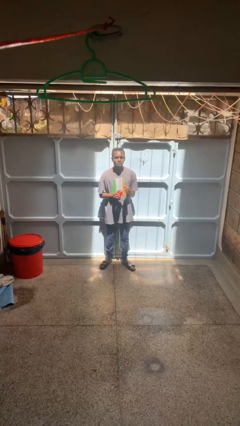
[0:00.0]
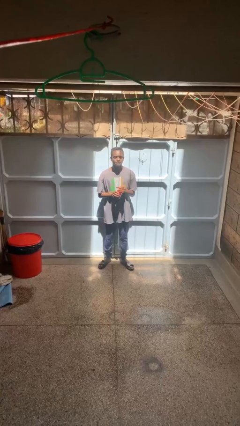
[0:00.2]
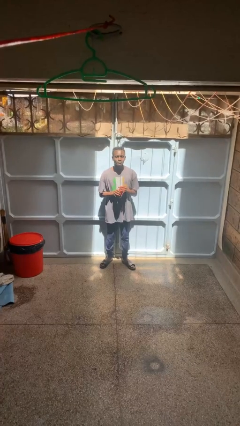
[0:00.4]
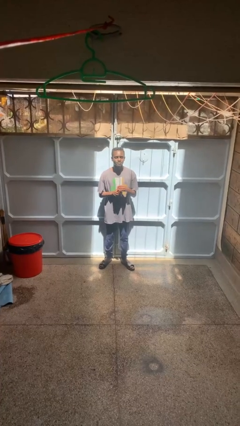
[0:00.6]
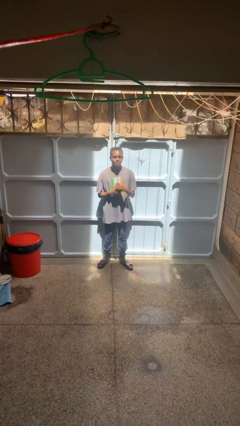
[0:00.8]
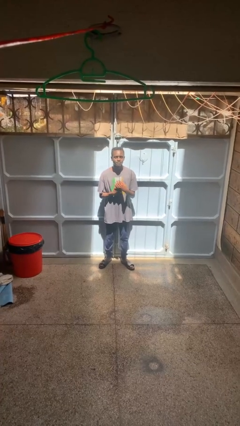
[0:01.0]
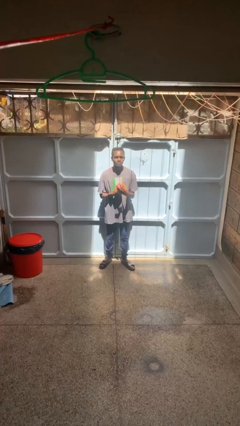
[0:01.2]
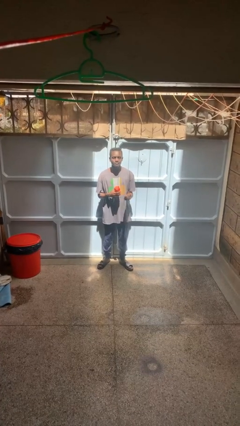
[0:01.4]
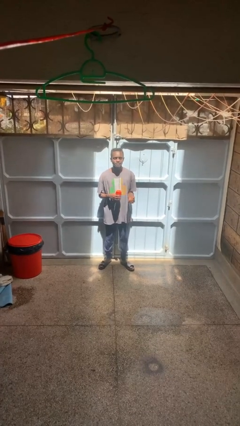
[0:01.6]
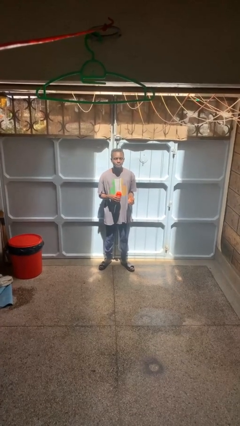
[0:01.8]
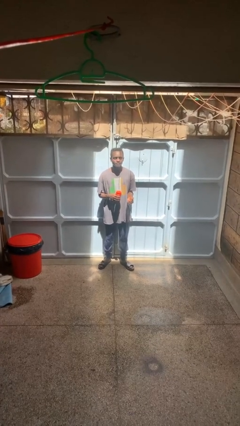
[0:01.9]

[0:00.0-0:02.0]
person closes jar

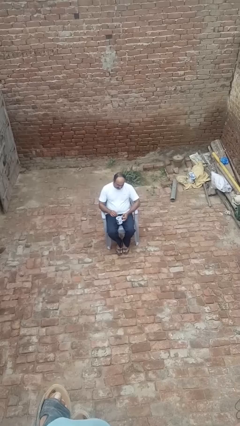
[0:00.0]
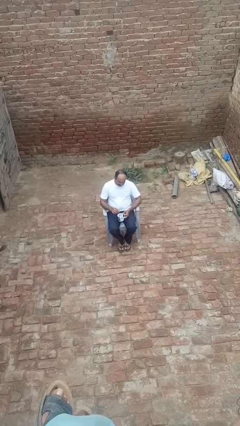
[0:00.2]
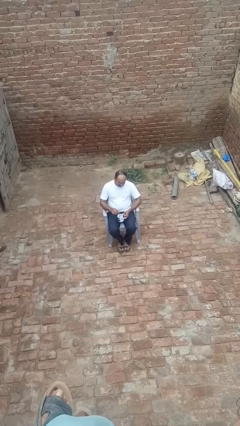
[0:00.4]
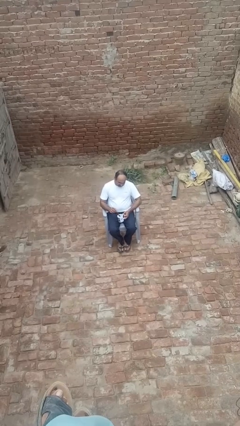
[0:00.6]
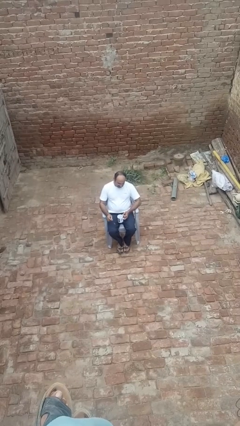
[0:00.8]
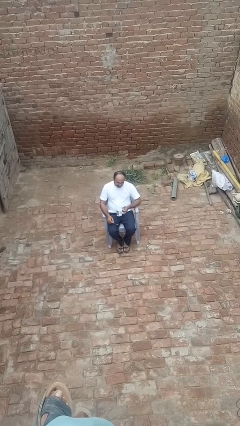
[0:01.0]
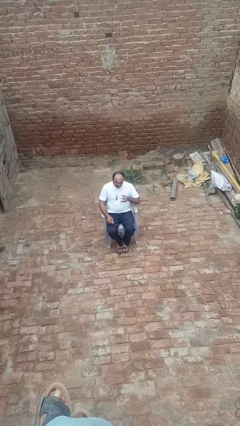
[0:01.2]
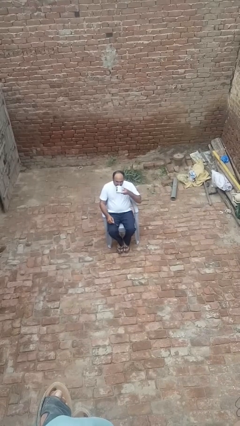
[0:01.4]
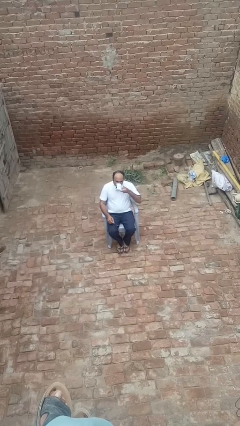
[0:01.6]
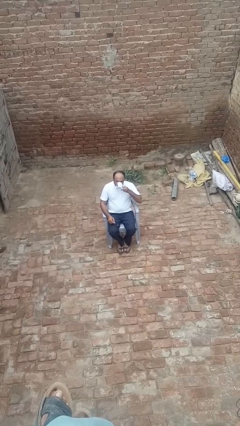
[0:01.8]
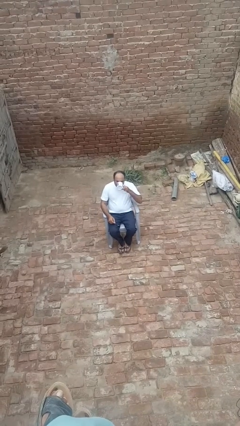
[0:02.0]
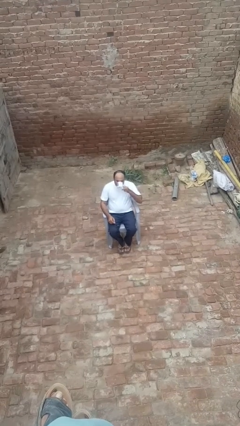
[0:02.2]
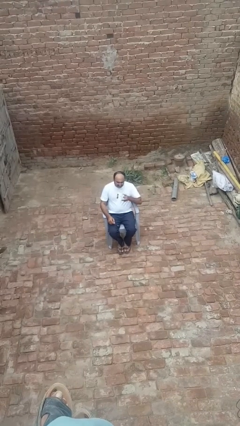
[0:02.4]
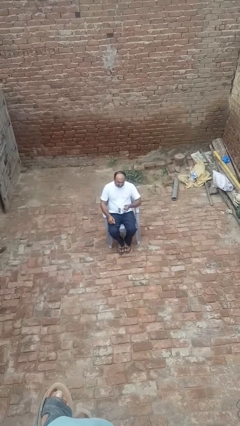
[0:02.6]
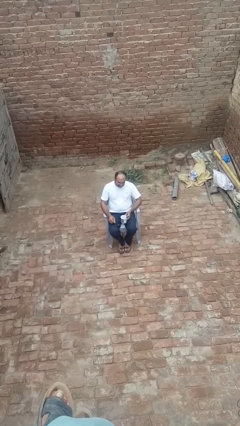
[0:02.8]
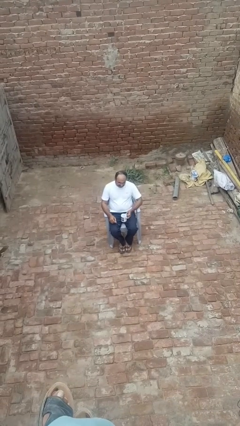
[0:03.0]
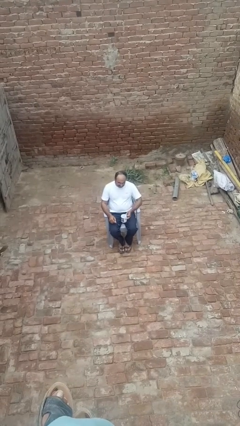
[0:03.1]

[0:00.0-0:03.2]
person drinks from mug

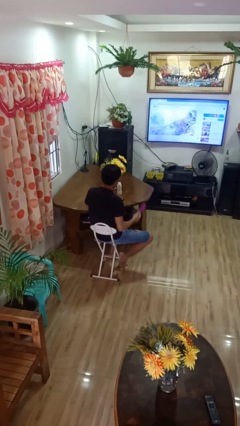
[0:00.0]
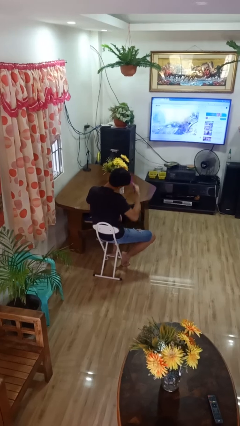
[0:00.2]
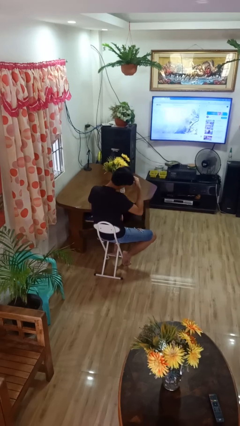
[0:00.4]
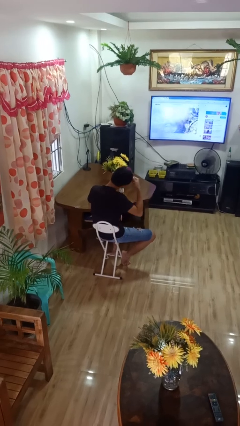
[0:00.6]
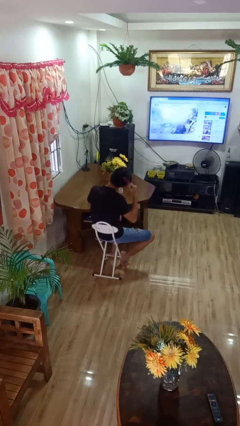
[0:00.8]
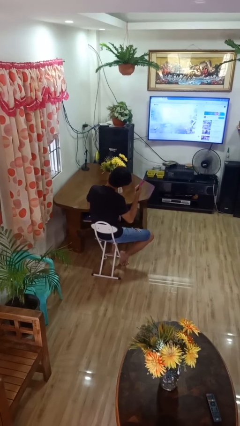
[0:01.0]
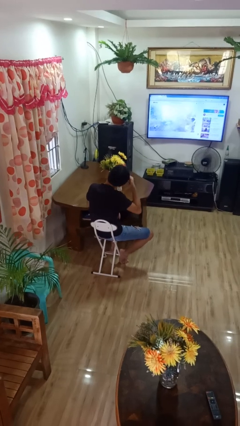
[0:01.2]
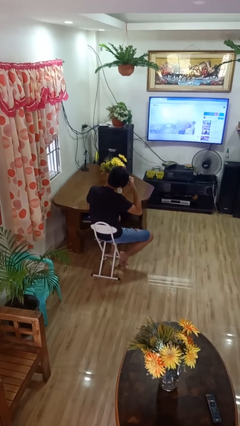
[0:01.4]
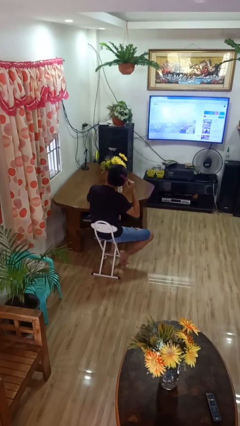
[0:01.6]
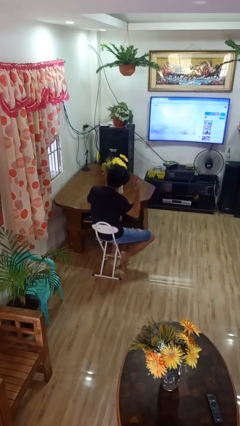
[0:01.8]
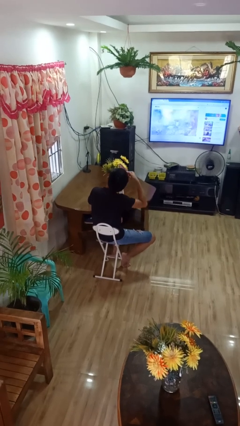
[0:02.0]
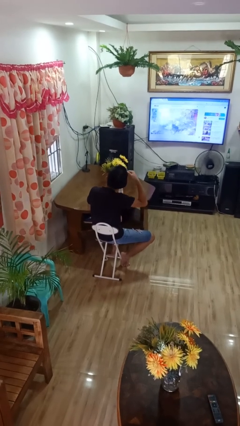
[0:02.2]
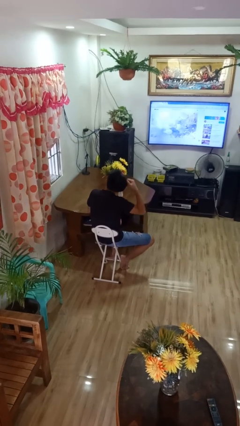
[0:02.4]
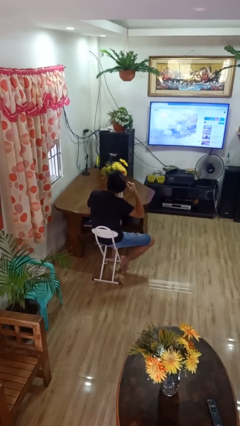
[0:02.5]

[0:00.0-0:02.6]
person brushes hair

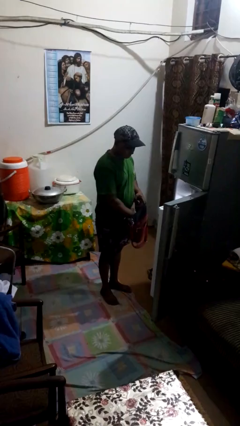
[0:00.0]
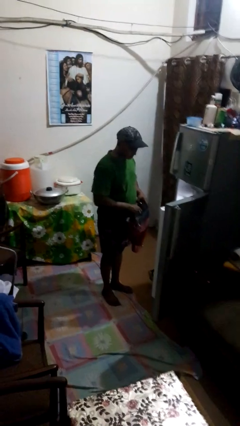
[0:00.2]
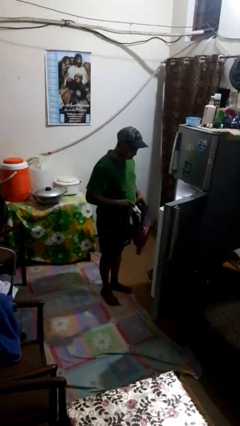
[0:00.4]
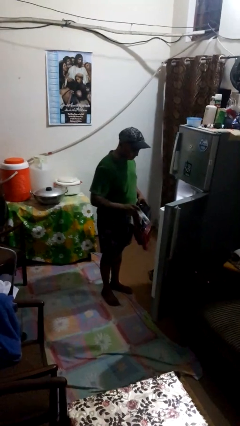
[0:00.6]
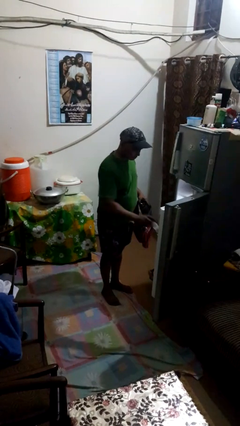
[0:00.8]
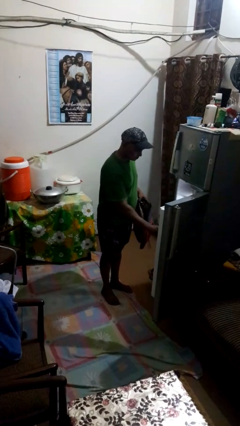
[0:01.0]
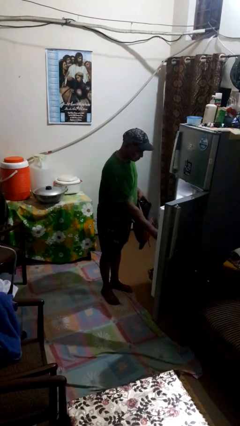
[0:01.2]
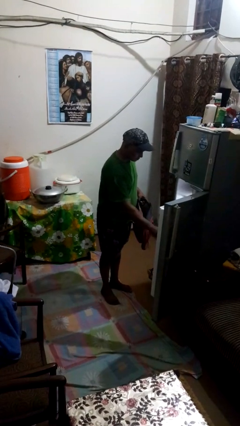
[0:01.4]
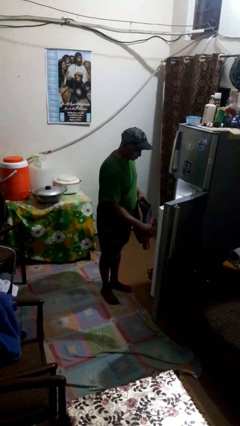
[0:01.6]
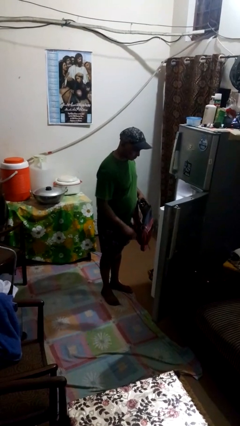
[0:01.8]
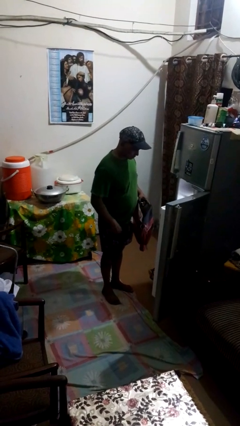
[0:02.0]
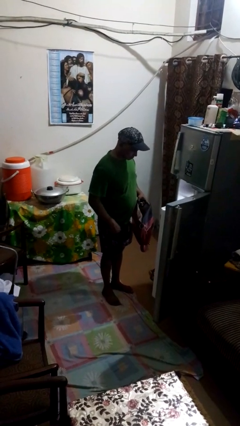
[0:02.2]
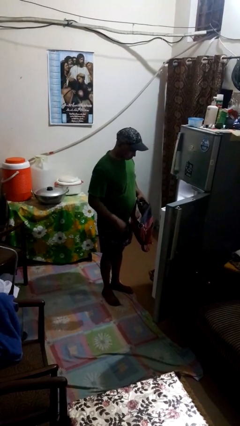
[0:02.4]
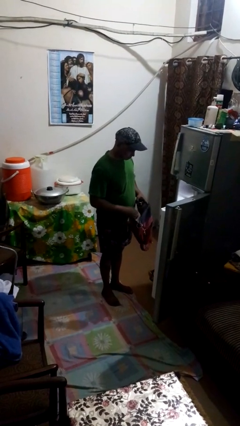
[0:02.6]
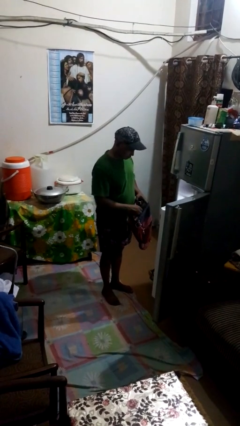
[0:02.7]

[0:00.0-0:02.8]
person loads groceries into refrigerator

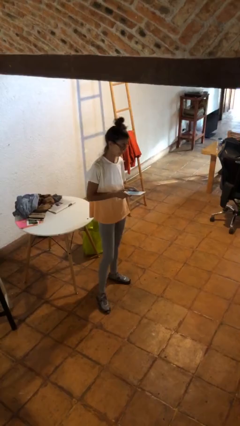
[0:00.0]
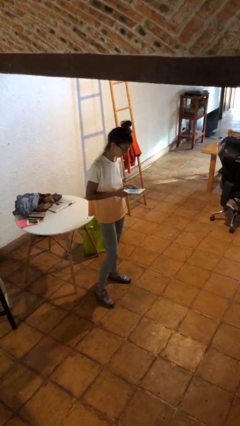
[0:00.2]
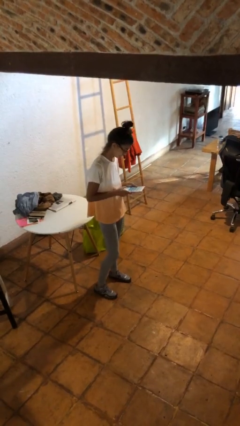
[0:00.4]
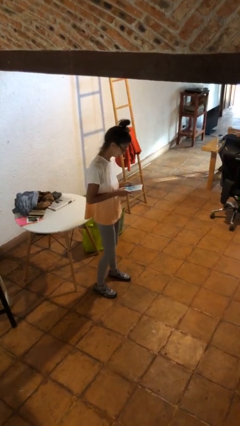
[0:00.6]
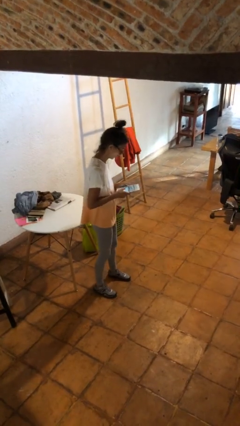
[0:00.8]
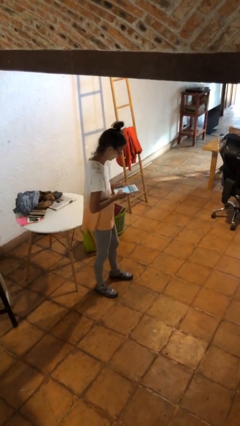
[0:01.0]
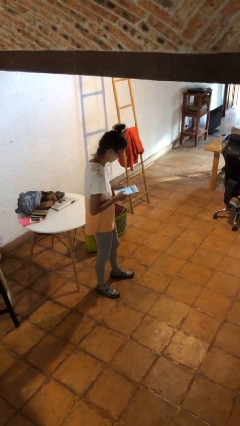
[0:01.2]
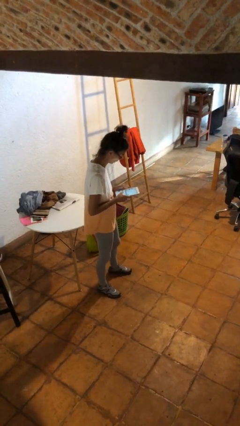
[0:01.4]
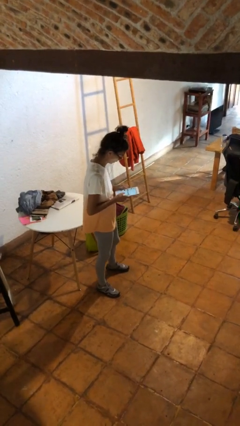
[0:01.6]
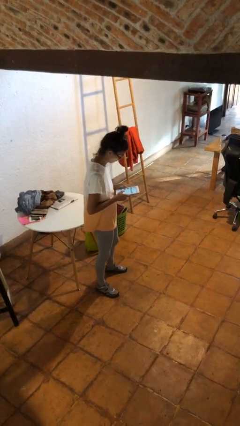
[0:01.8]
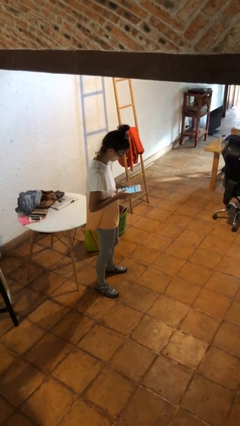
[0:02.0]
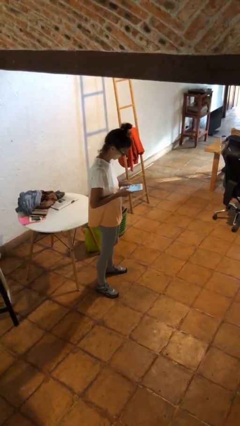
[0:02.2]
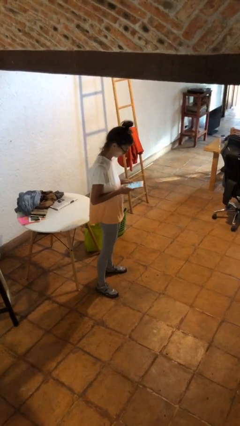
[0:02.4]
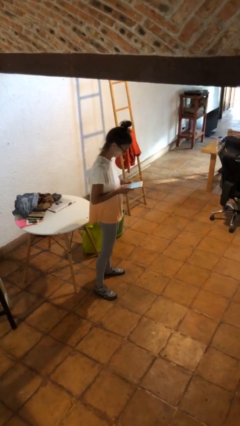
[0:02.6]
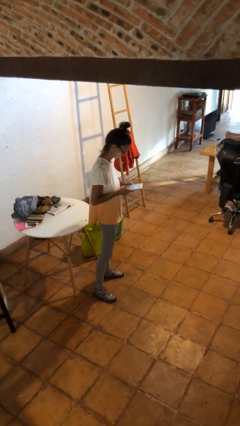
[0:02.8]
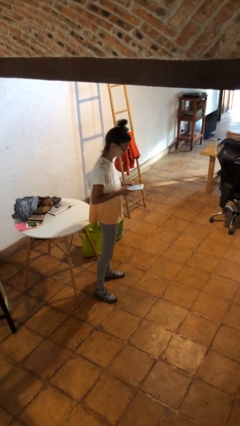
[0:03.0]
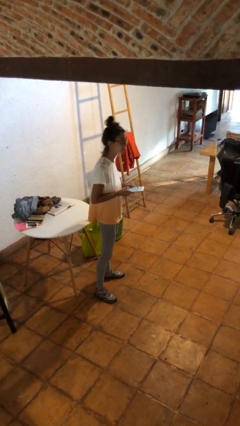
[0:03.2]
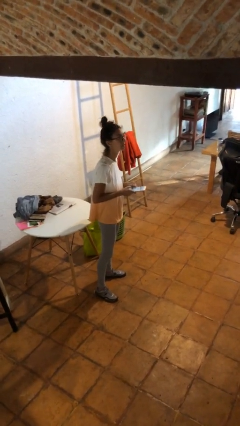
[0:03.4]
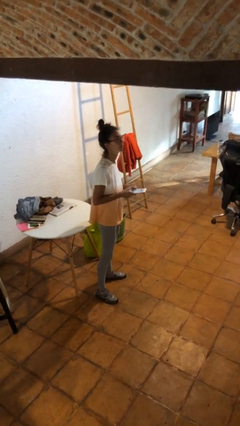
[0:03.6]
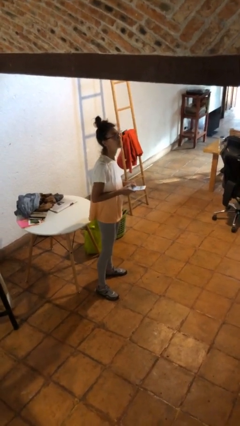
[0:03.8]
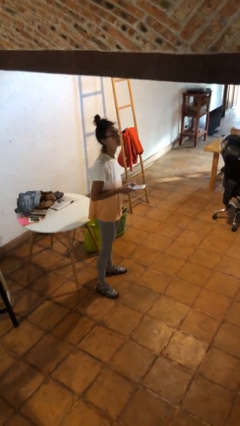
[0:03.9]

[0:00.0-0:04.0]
person interacts with tablet

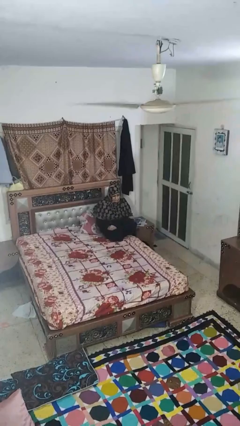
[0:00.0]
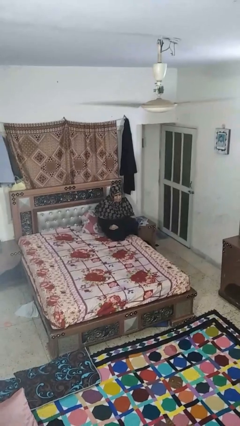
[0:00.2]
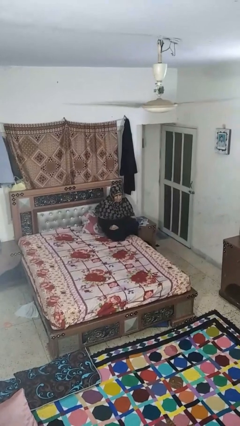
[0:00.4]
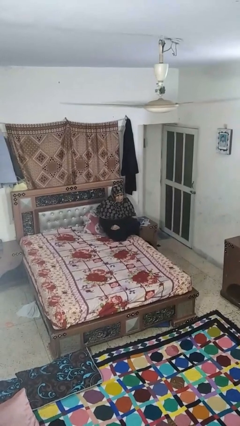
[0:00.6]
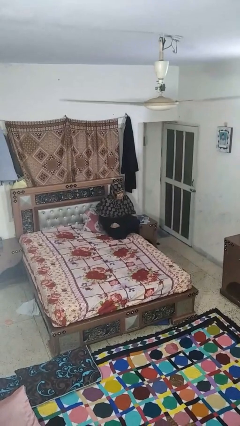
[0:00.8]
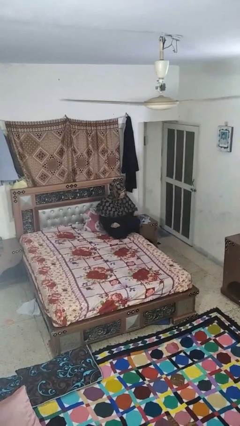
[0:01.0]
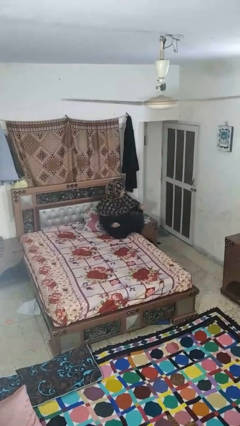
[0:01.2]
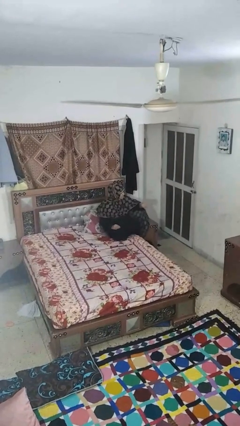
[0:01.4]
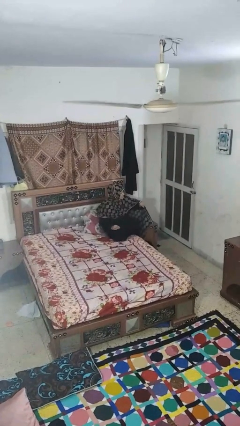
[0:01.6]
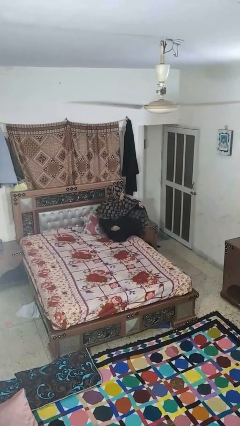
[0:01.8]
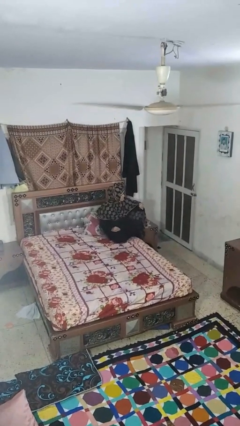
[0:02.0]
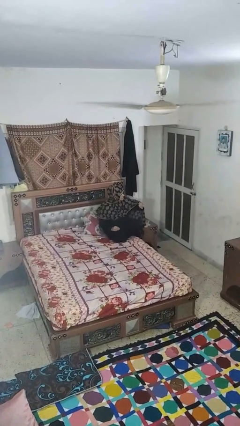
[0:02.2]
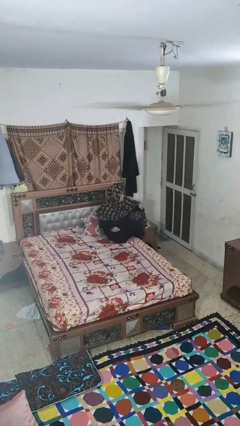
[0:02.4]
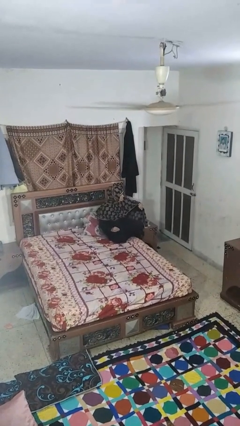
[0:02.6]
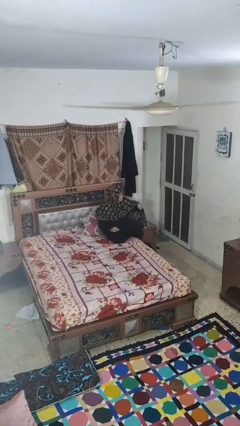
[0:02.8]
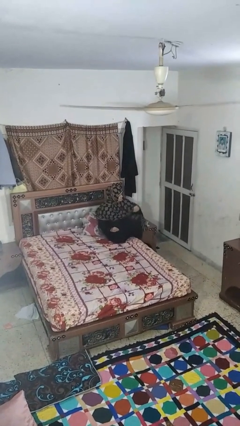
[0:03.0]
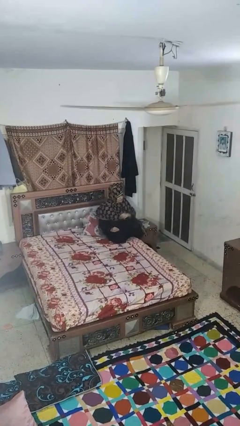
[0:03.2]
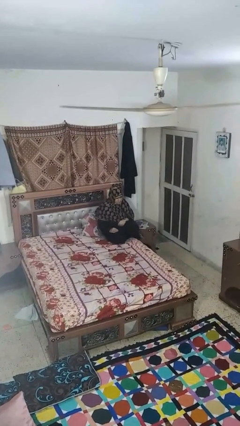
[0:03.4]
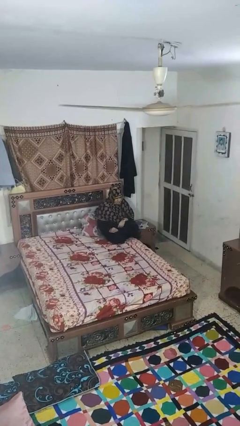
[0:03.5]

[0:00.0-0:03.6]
person looks at wristwatch
